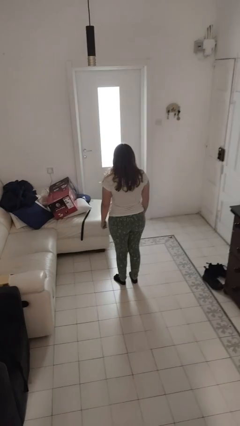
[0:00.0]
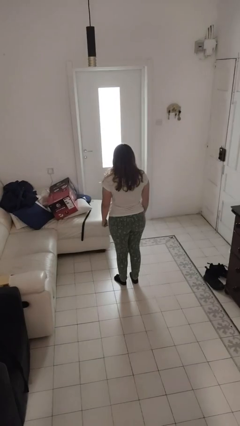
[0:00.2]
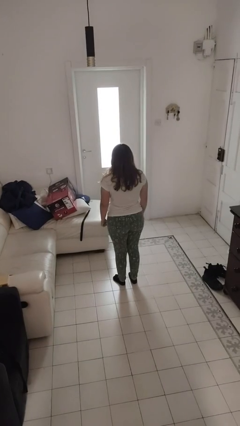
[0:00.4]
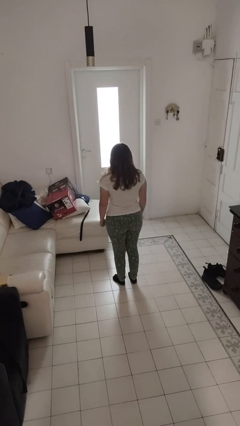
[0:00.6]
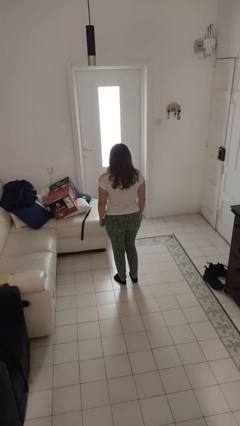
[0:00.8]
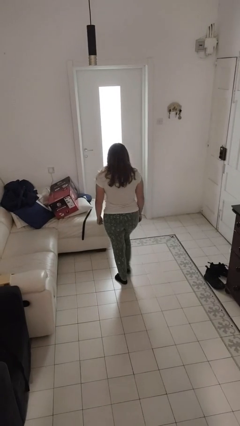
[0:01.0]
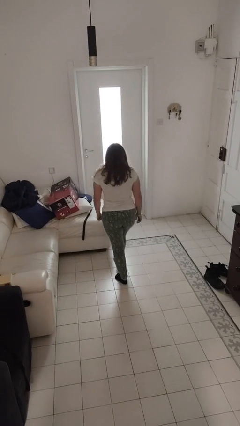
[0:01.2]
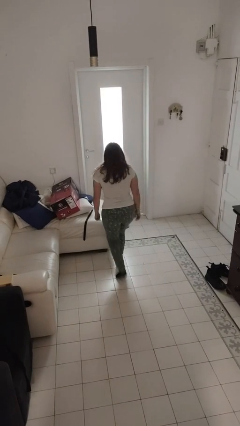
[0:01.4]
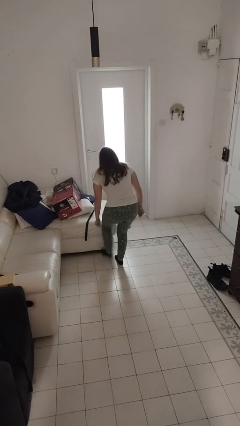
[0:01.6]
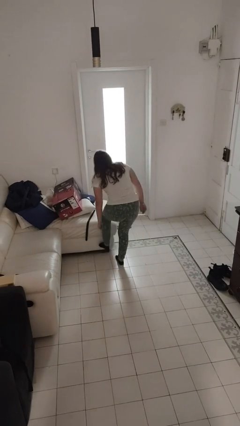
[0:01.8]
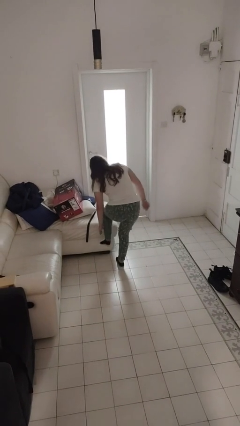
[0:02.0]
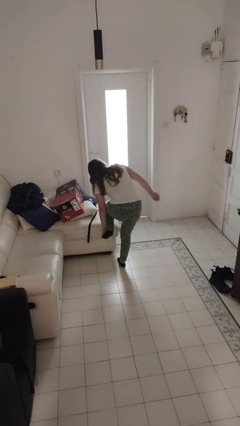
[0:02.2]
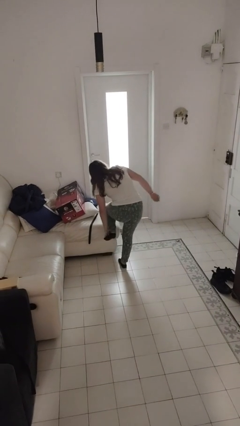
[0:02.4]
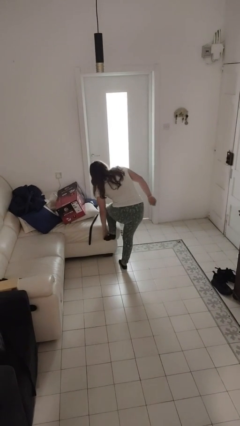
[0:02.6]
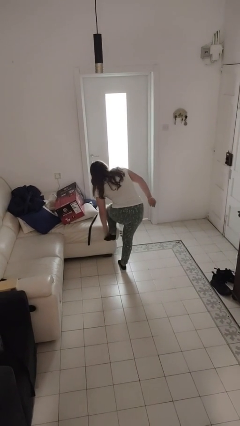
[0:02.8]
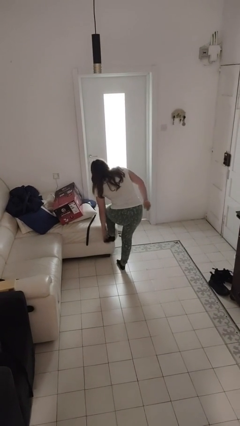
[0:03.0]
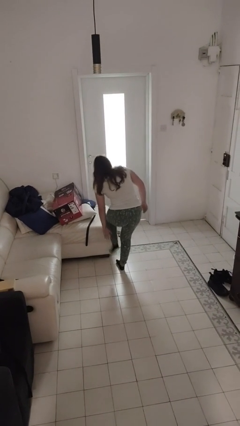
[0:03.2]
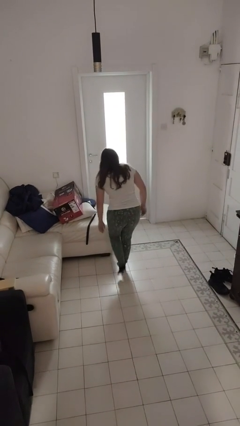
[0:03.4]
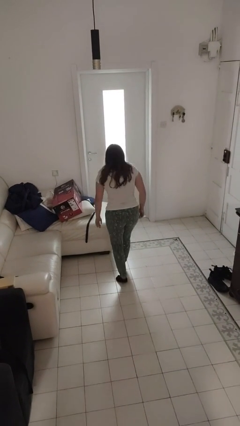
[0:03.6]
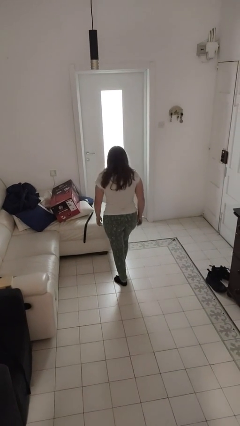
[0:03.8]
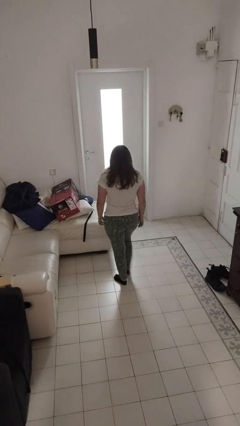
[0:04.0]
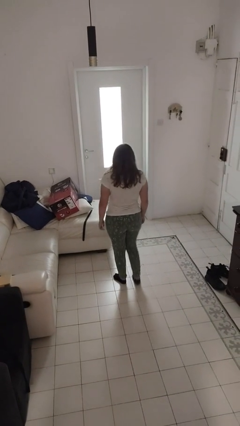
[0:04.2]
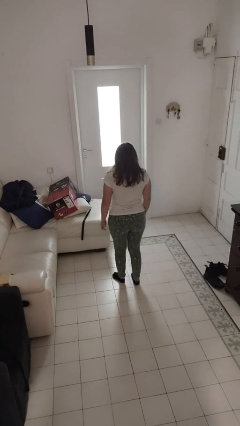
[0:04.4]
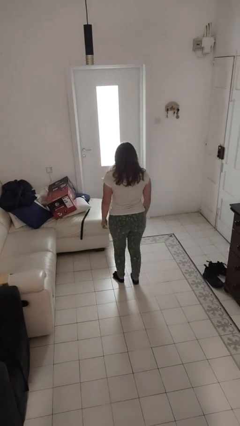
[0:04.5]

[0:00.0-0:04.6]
person stubs toe

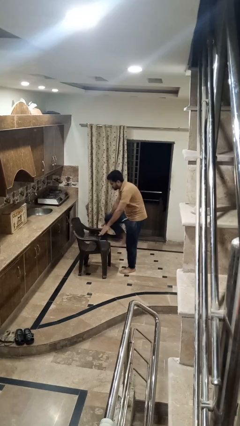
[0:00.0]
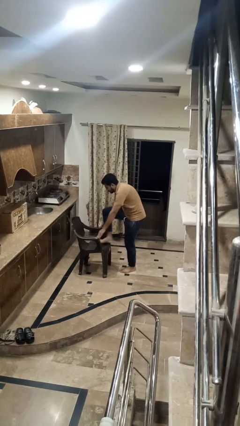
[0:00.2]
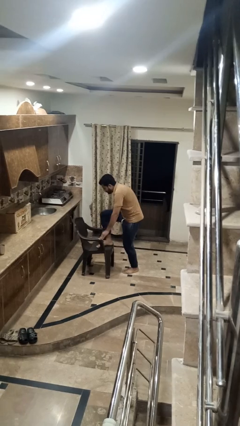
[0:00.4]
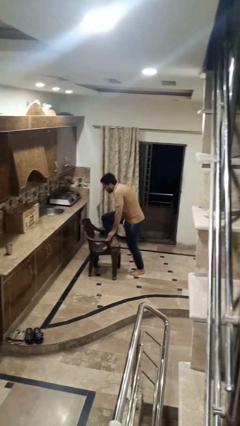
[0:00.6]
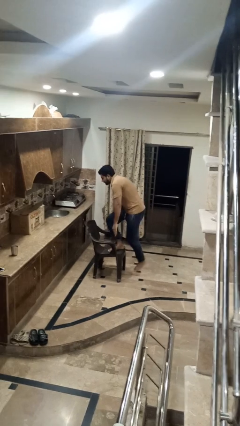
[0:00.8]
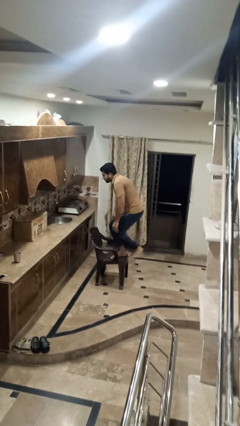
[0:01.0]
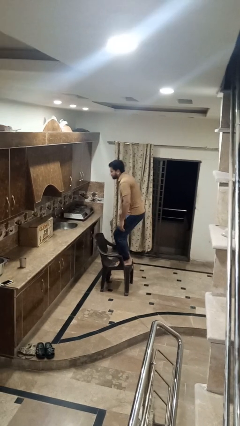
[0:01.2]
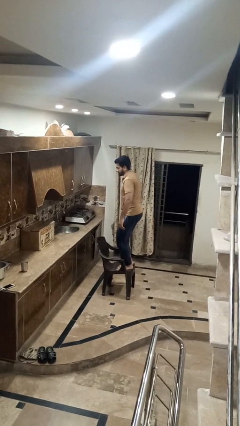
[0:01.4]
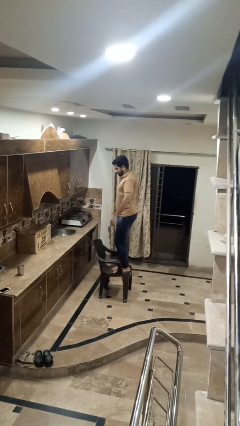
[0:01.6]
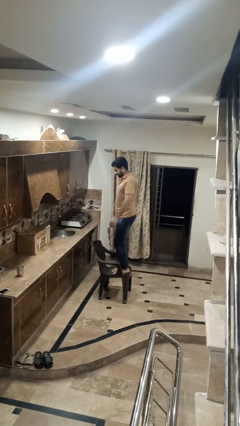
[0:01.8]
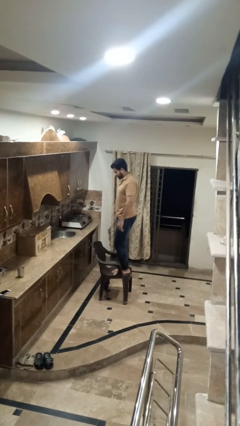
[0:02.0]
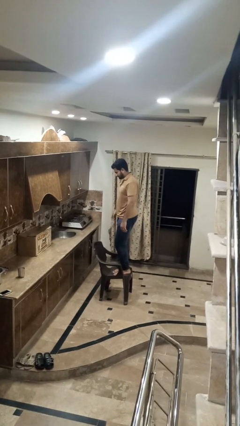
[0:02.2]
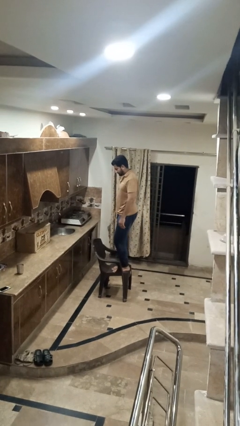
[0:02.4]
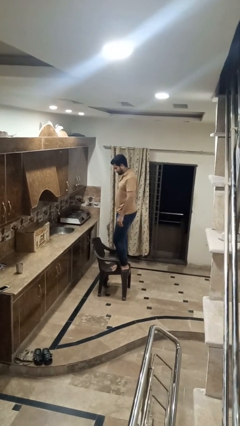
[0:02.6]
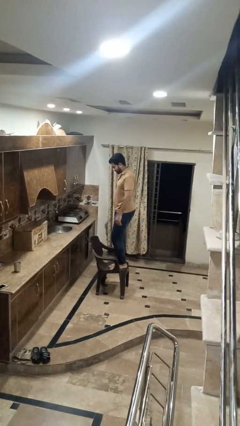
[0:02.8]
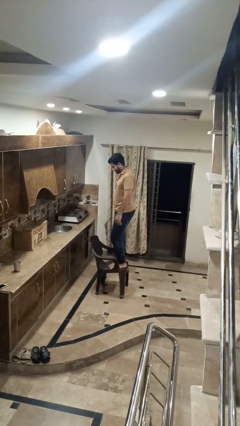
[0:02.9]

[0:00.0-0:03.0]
person climbs on chair

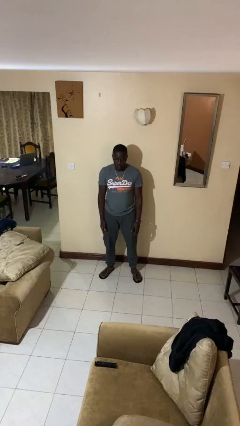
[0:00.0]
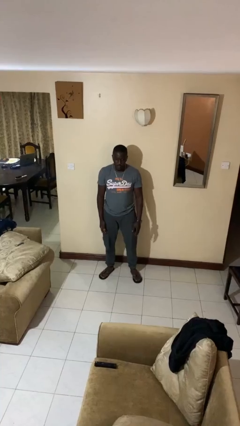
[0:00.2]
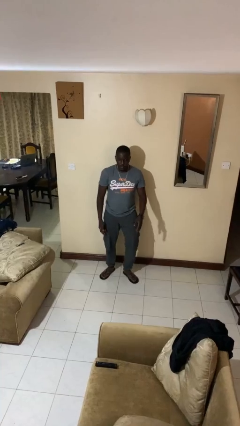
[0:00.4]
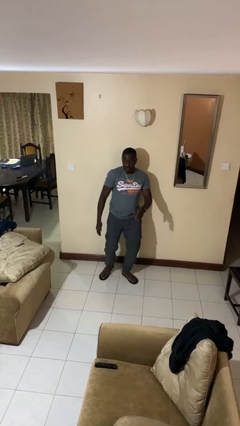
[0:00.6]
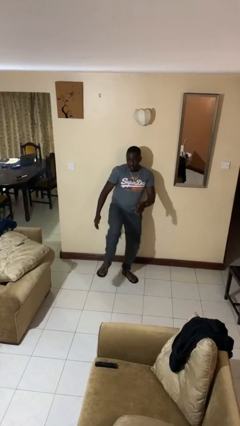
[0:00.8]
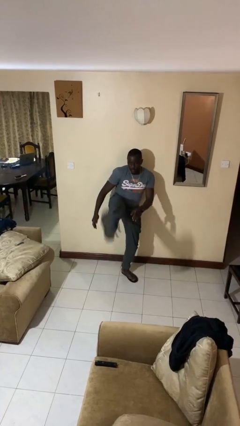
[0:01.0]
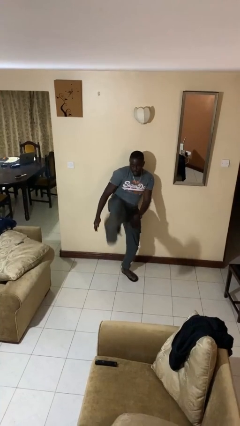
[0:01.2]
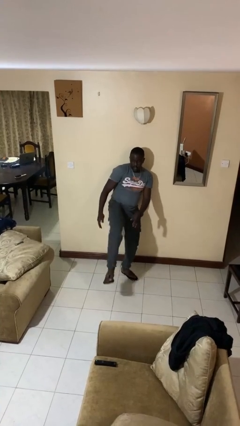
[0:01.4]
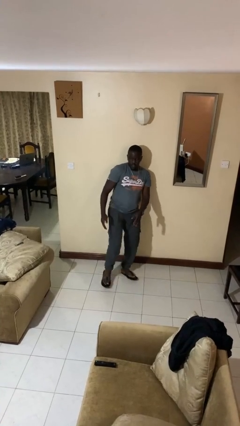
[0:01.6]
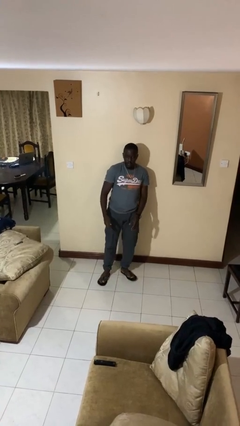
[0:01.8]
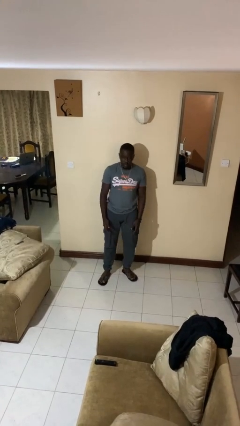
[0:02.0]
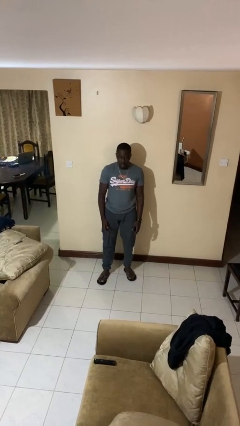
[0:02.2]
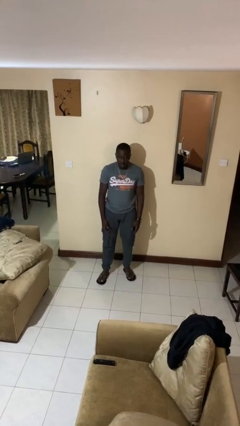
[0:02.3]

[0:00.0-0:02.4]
person karate kicks

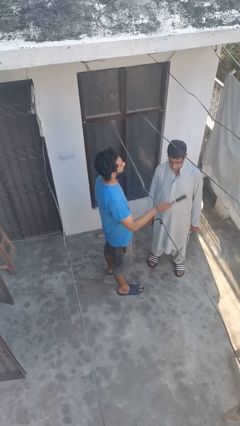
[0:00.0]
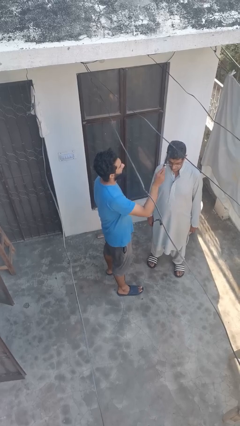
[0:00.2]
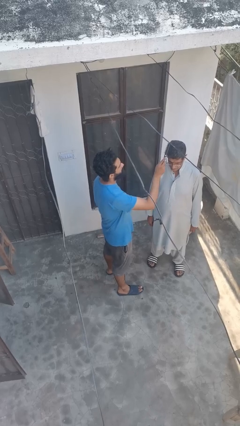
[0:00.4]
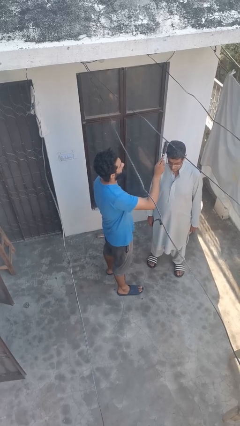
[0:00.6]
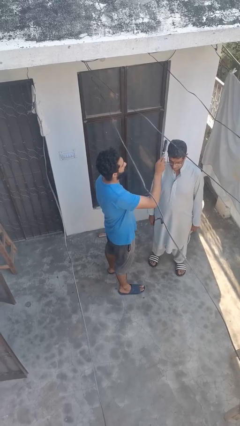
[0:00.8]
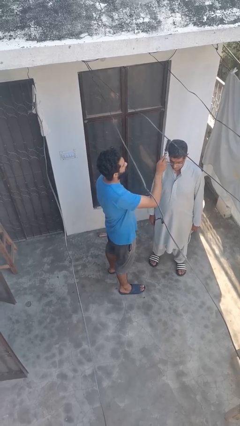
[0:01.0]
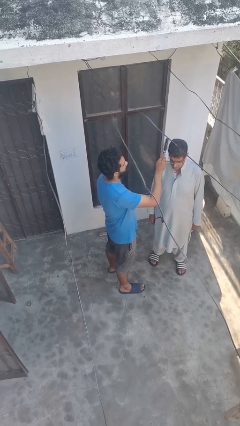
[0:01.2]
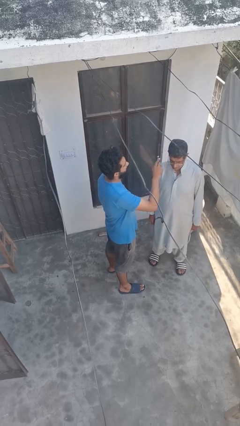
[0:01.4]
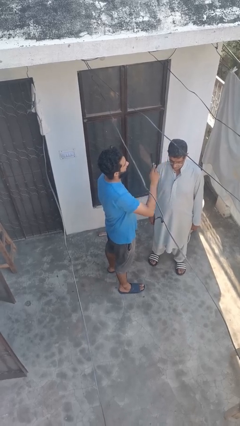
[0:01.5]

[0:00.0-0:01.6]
person brushes hair of person

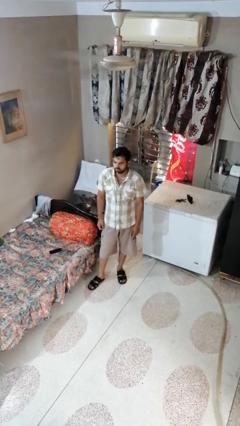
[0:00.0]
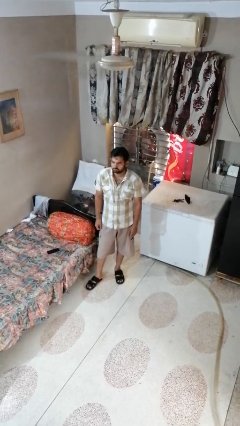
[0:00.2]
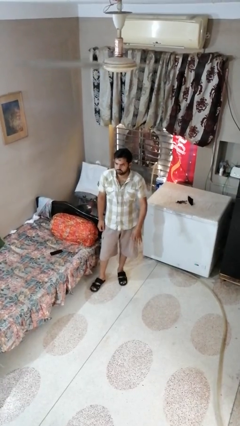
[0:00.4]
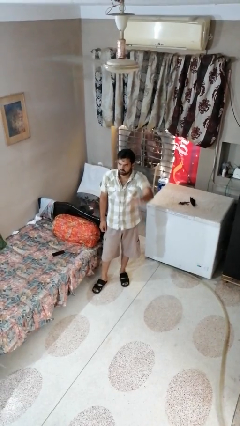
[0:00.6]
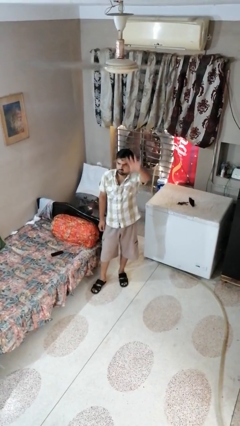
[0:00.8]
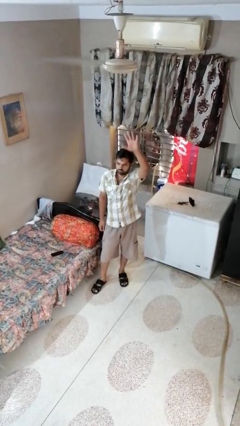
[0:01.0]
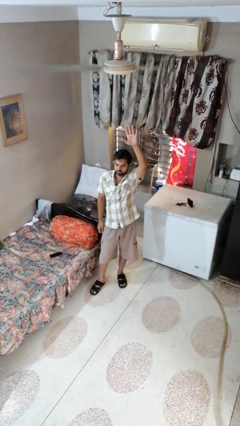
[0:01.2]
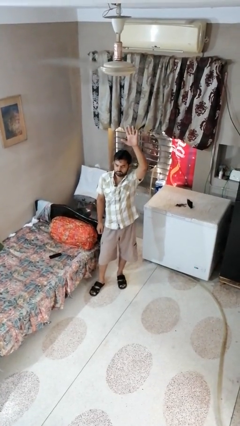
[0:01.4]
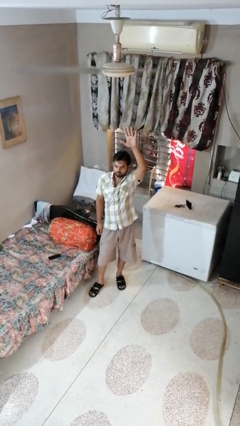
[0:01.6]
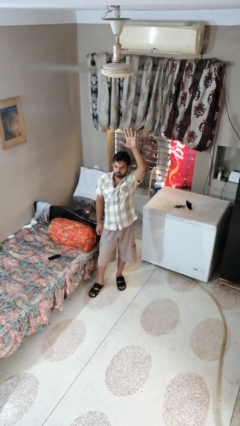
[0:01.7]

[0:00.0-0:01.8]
person gestures swipe up

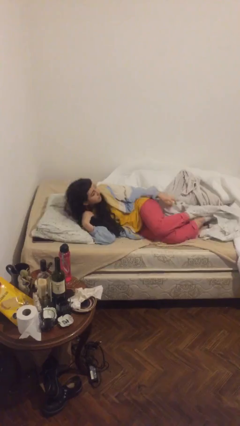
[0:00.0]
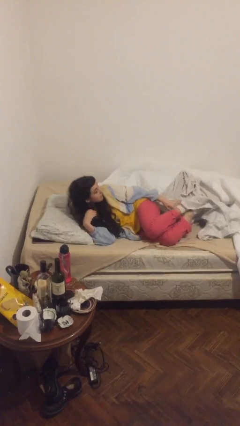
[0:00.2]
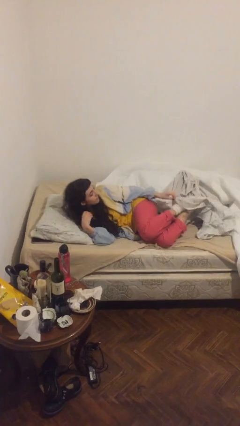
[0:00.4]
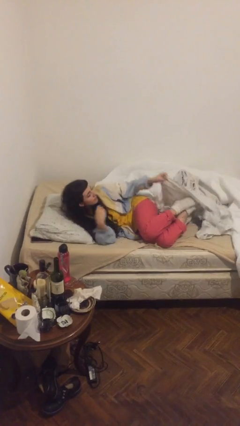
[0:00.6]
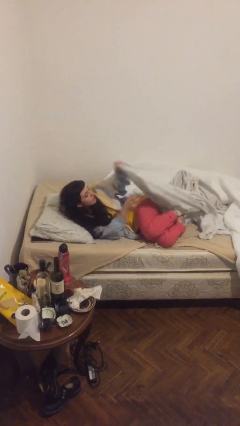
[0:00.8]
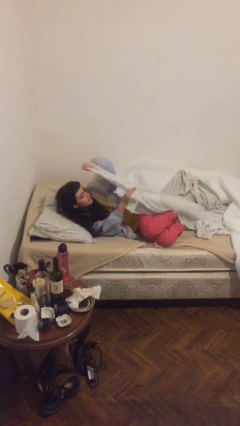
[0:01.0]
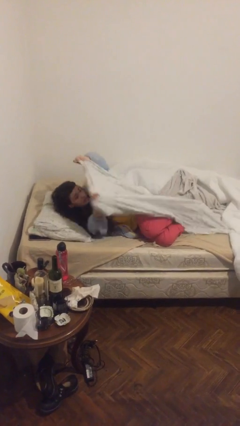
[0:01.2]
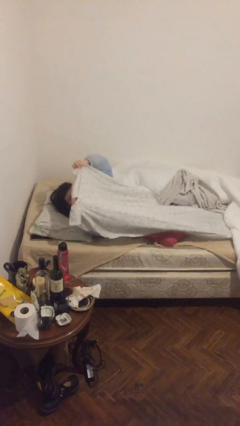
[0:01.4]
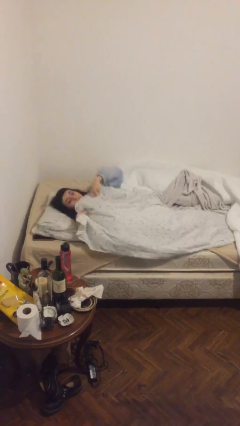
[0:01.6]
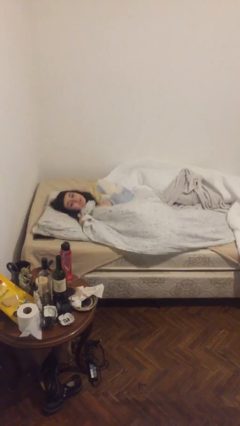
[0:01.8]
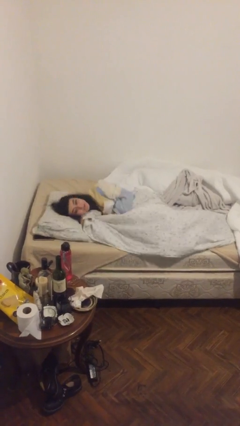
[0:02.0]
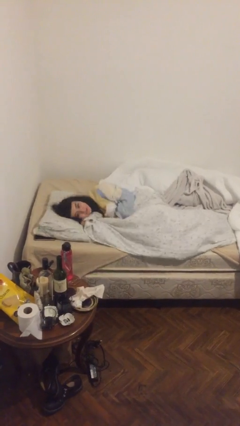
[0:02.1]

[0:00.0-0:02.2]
person covers with bedsheets

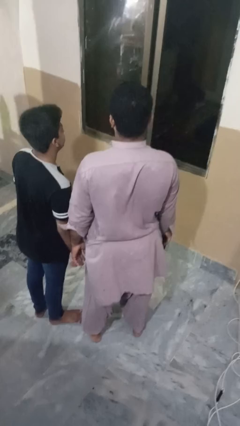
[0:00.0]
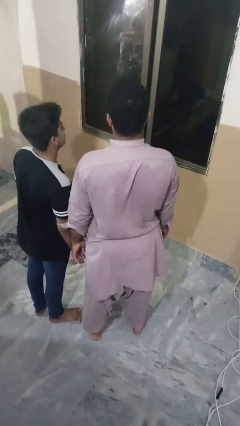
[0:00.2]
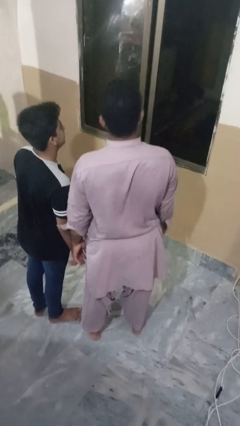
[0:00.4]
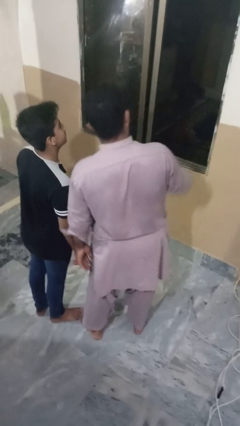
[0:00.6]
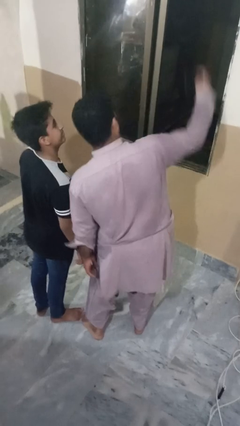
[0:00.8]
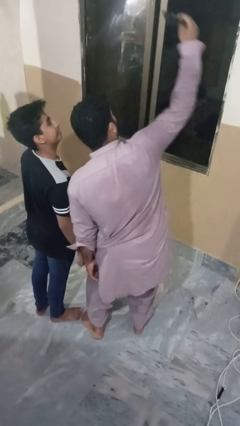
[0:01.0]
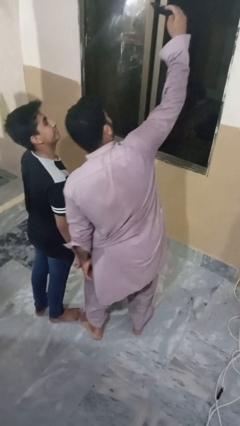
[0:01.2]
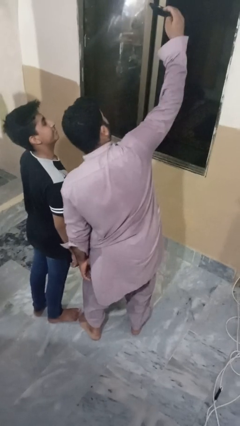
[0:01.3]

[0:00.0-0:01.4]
person takes selfie with person

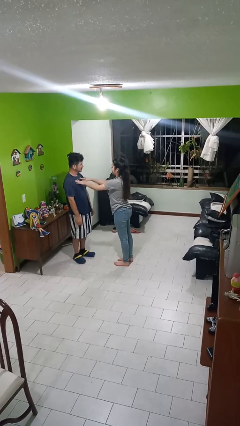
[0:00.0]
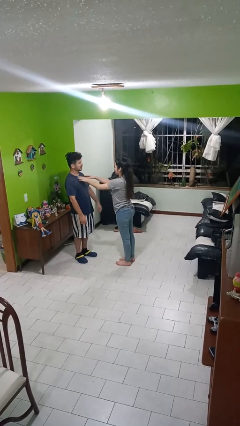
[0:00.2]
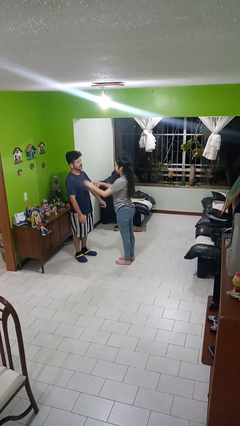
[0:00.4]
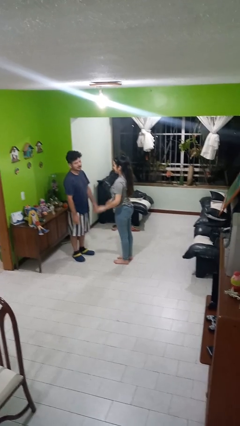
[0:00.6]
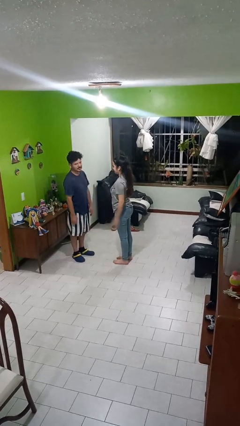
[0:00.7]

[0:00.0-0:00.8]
person shoves person
